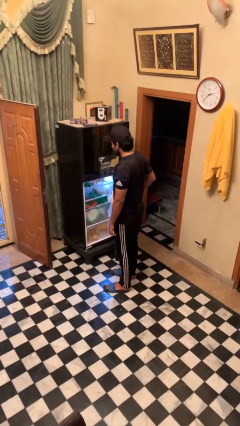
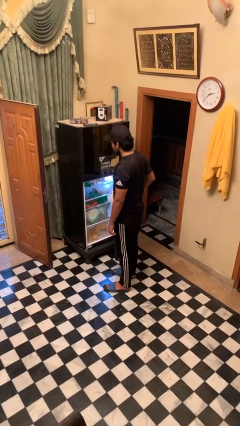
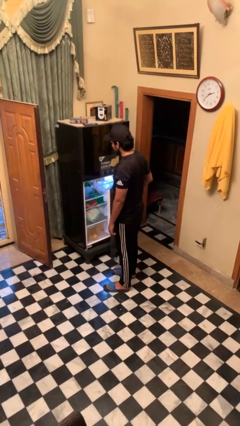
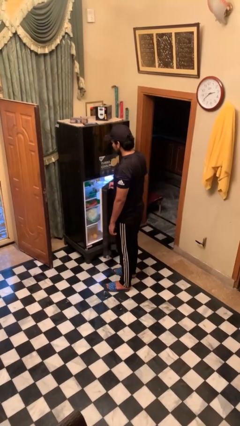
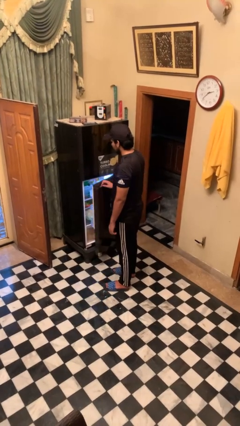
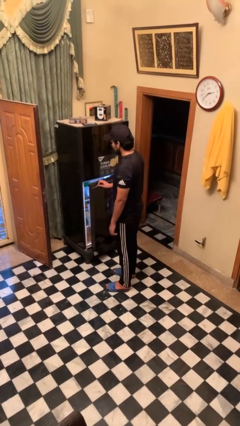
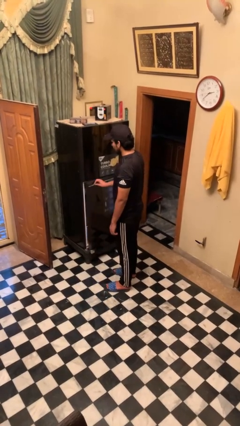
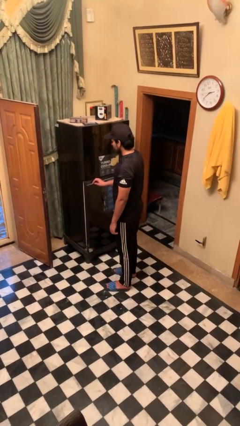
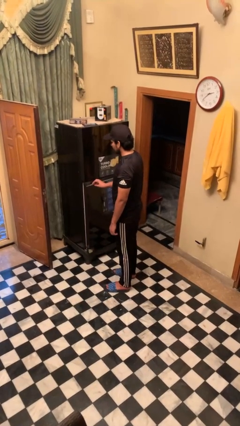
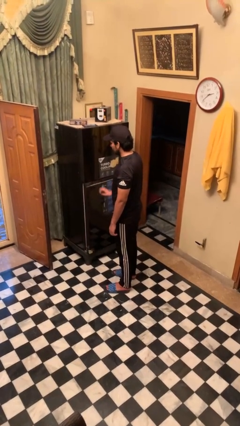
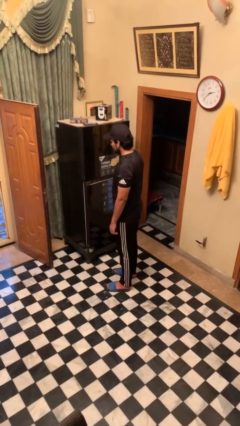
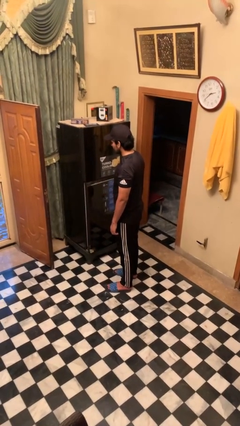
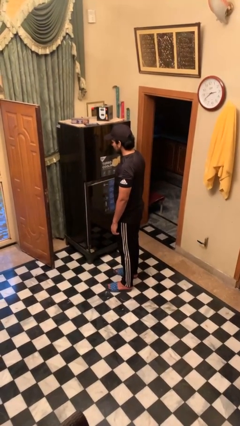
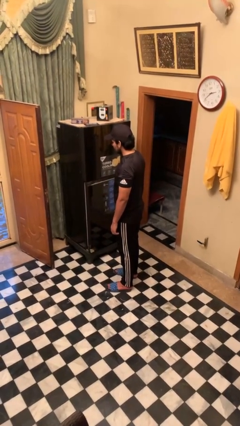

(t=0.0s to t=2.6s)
person closes refrigerator

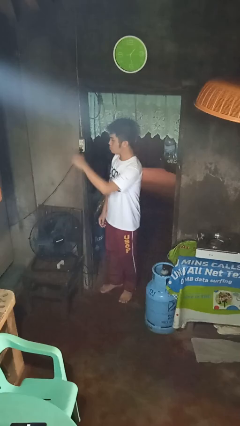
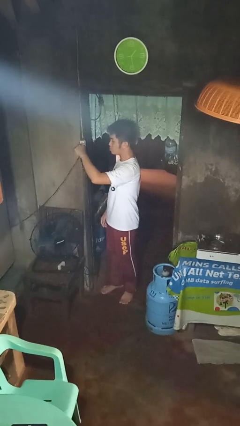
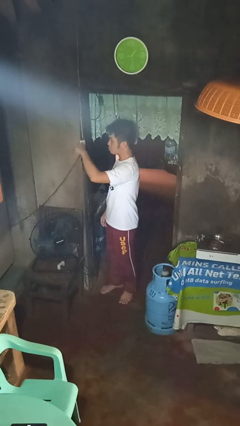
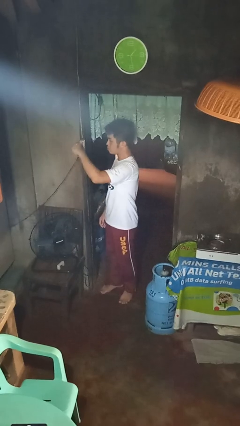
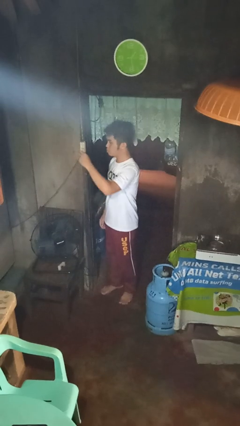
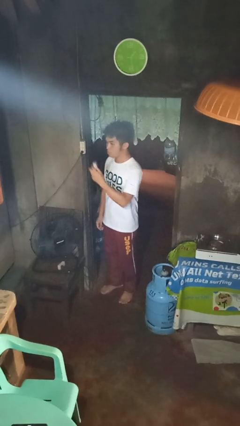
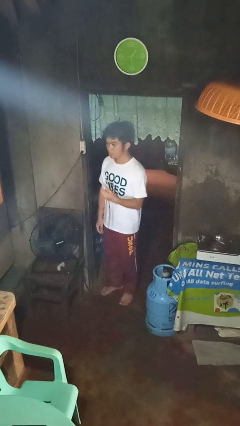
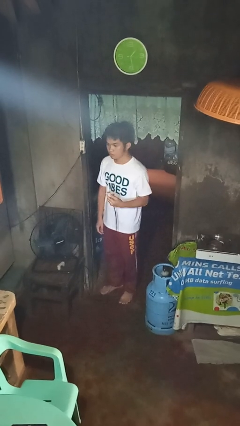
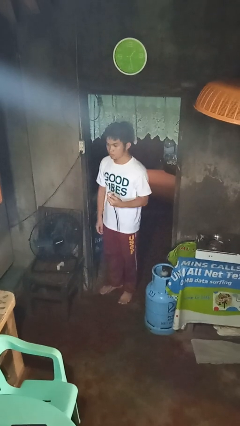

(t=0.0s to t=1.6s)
person unplugs from electrical socket

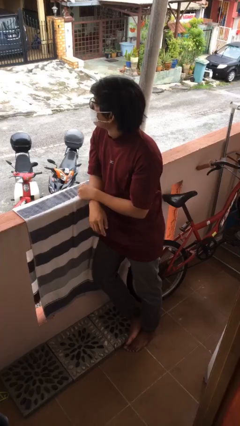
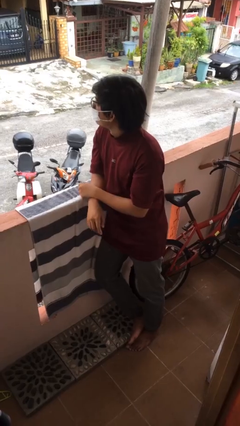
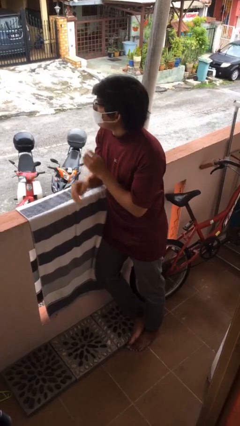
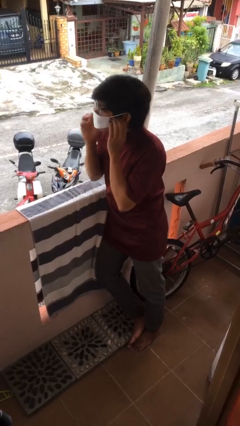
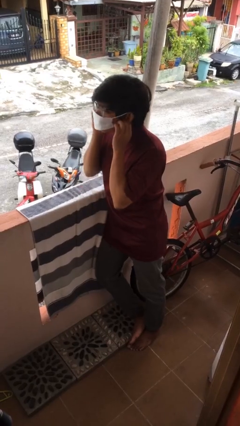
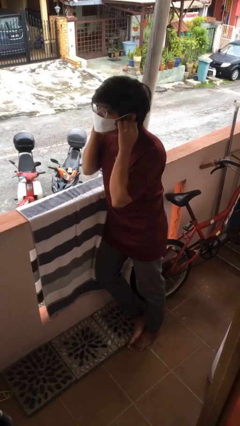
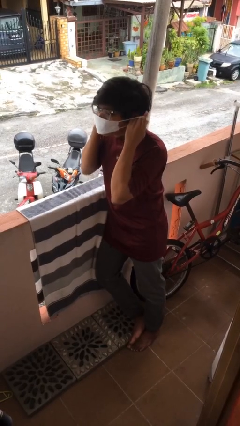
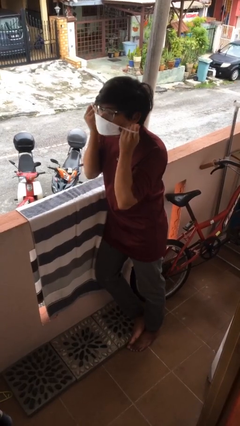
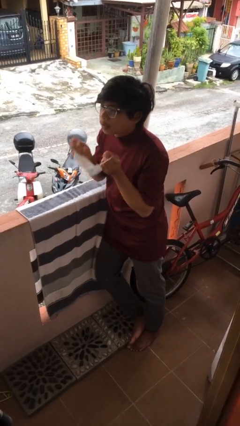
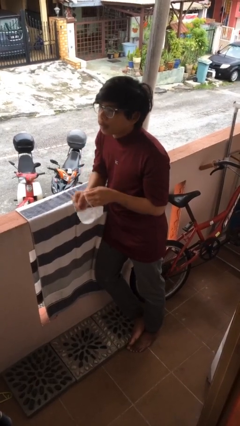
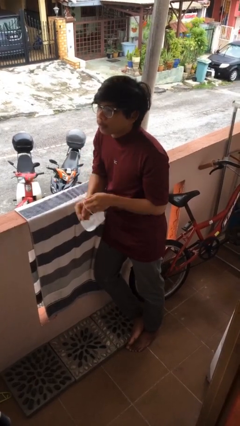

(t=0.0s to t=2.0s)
person takes off facemask

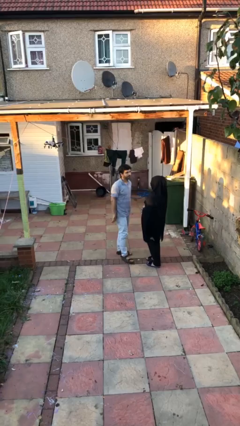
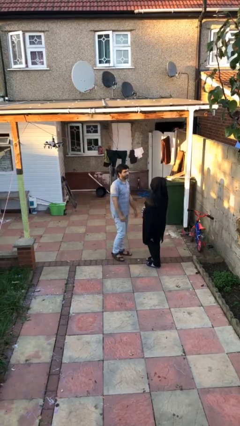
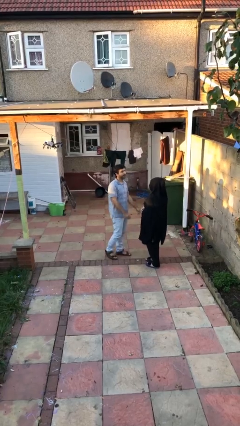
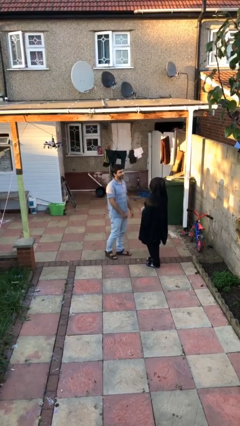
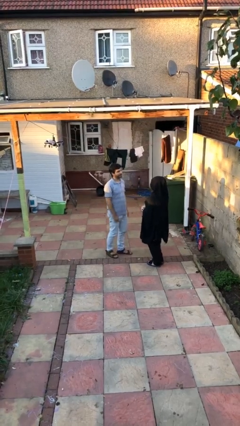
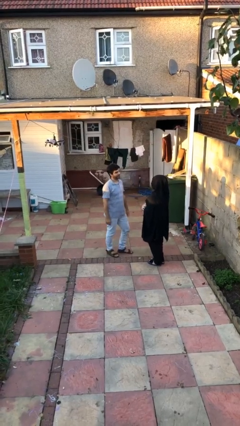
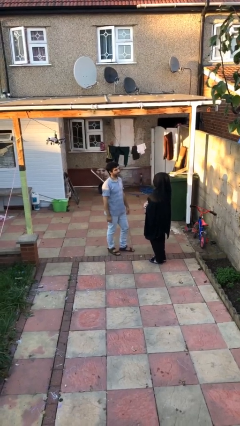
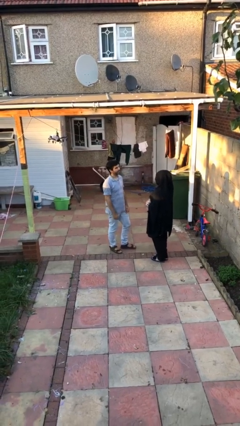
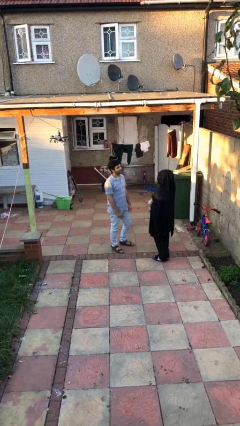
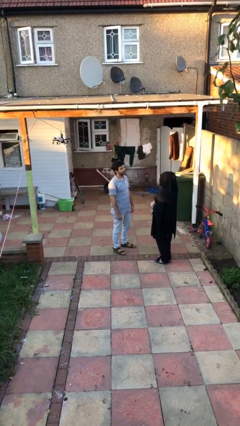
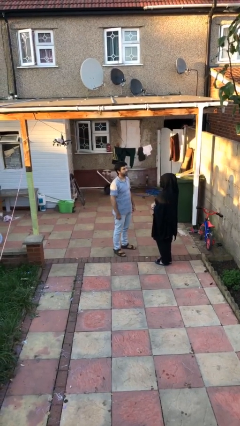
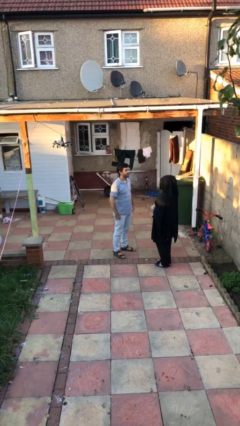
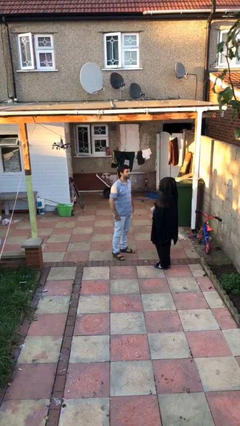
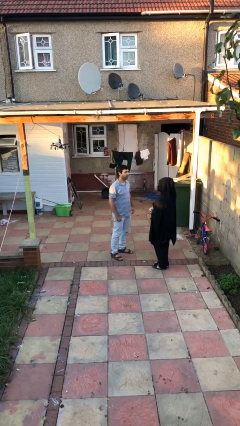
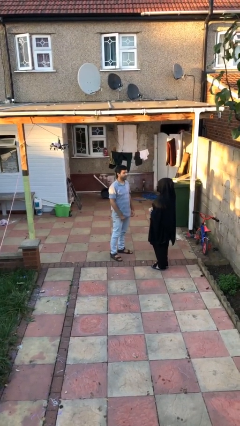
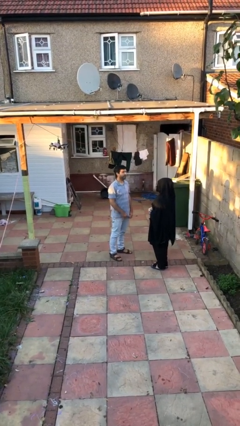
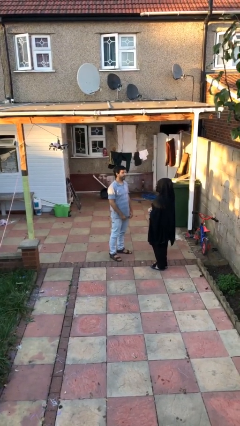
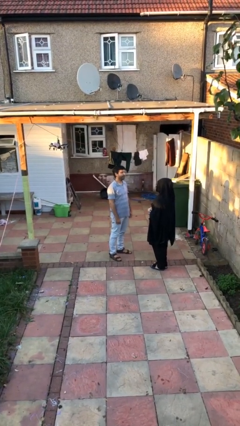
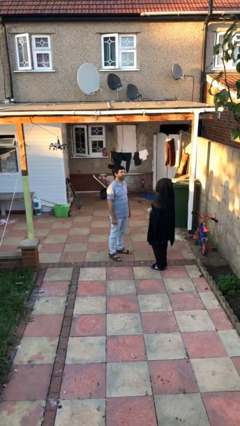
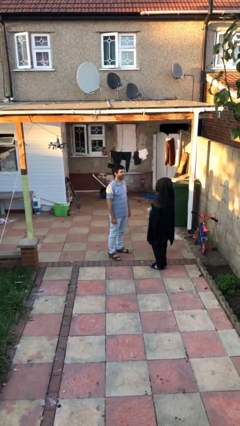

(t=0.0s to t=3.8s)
person talks to person

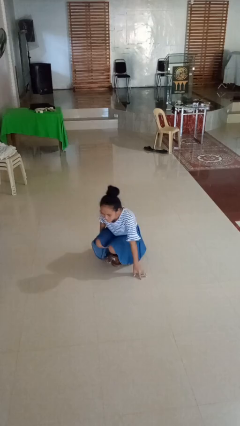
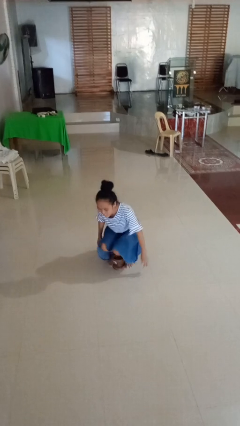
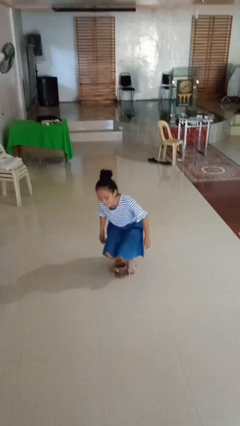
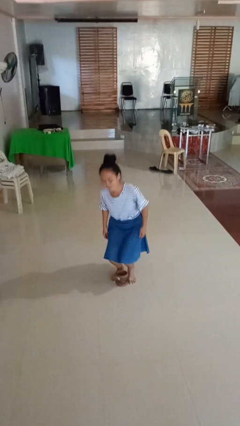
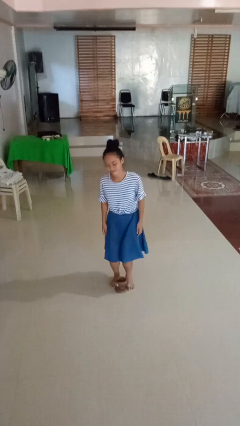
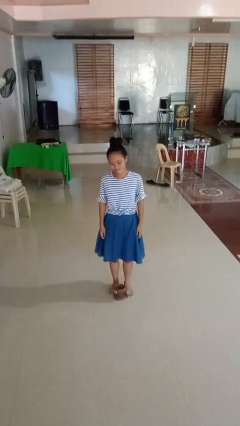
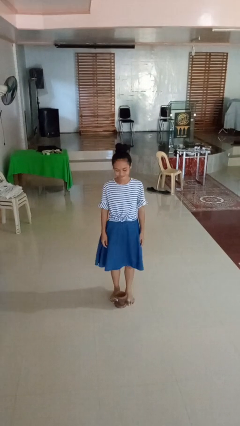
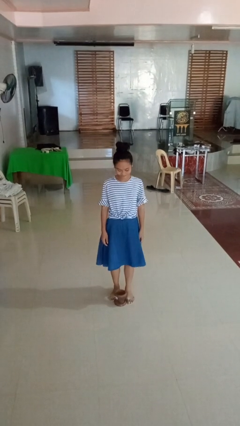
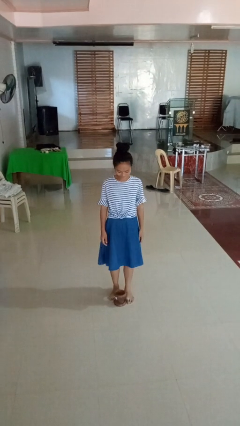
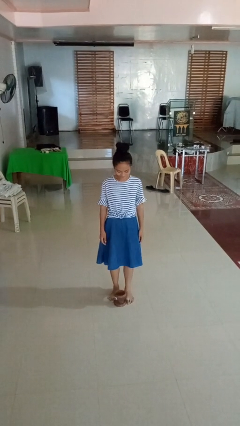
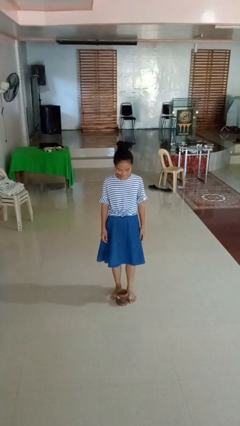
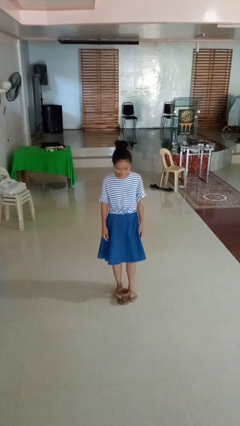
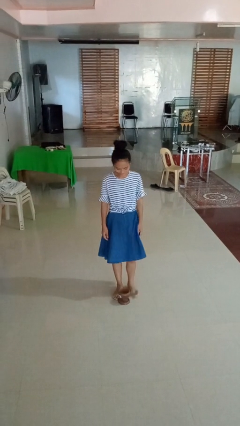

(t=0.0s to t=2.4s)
person stands up from floor

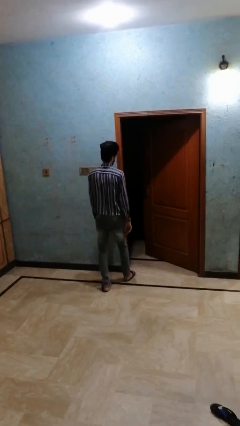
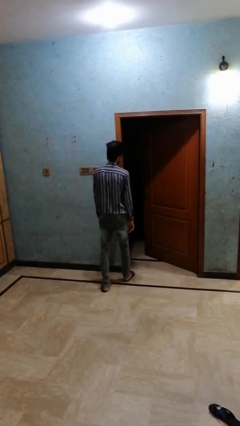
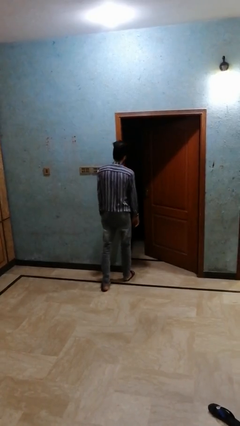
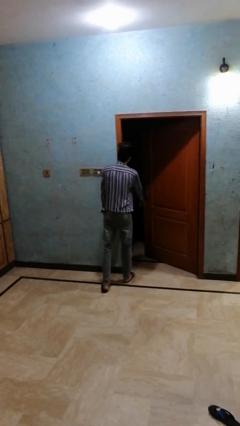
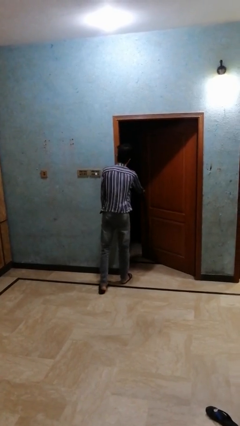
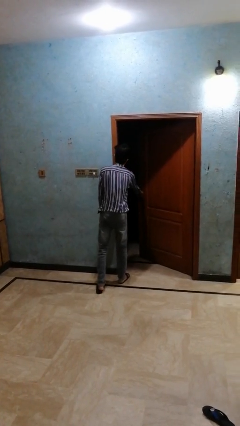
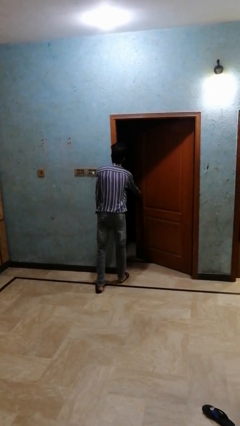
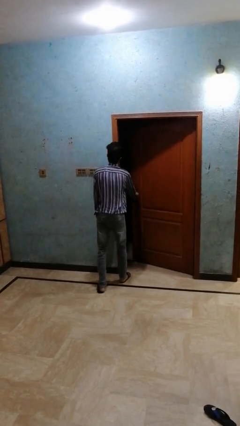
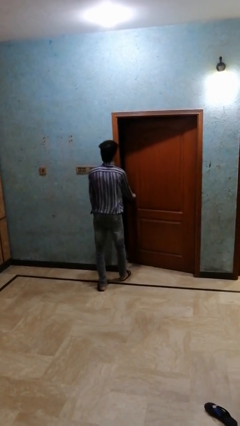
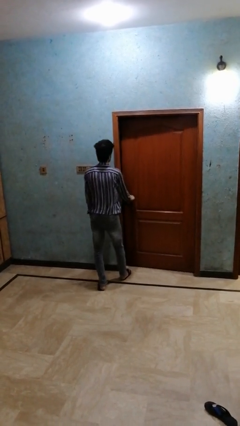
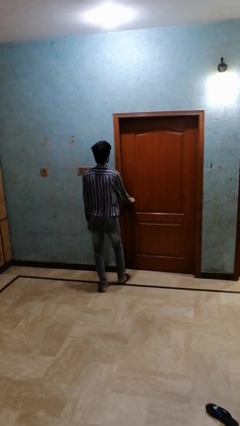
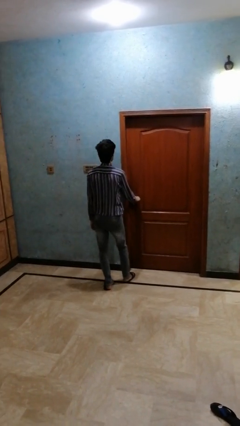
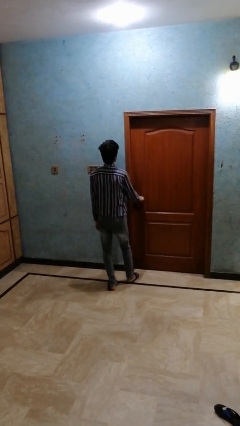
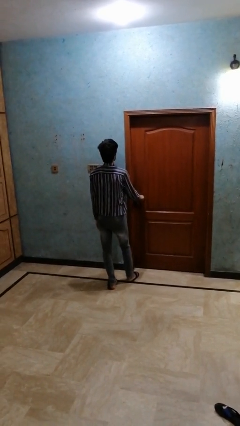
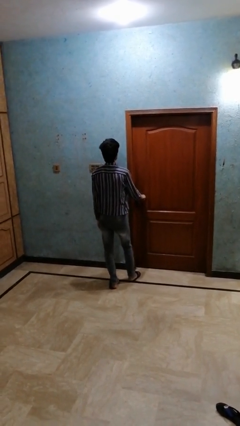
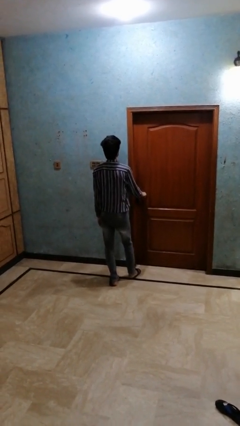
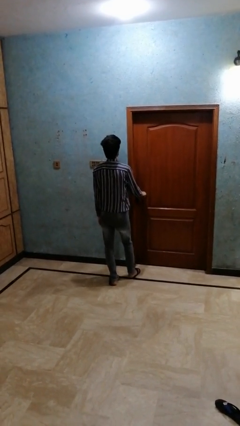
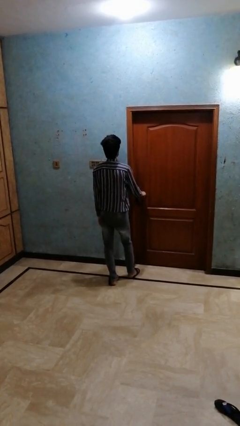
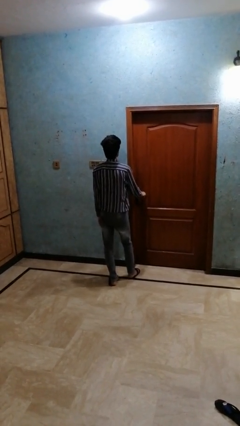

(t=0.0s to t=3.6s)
person closes closet door

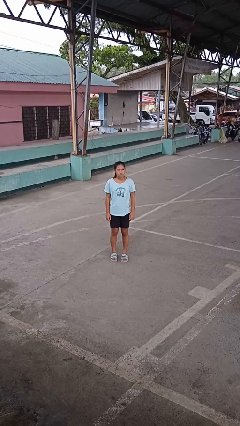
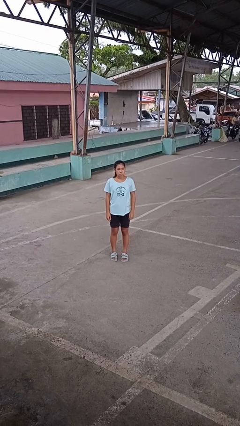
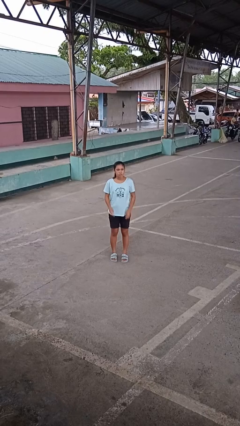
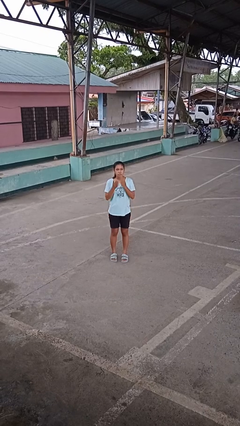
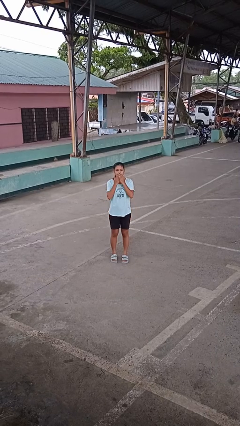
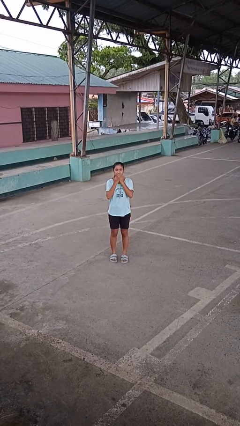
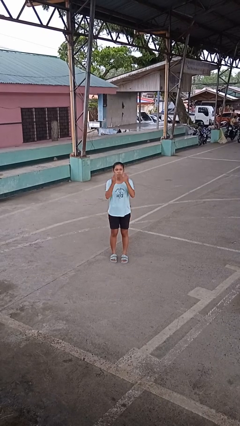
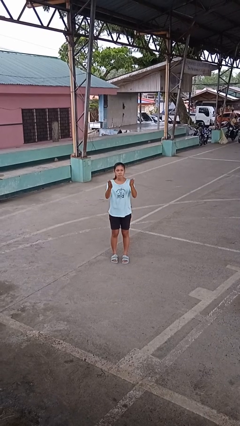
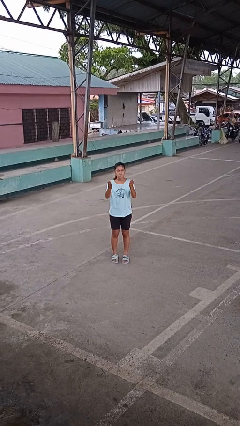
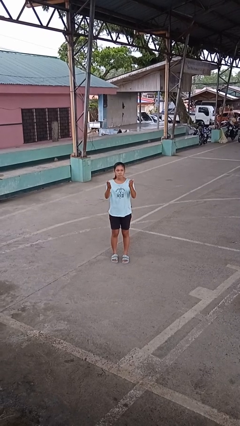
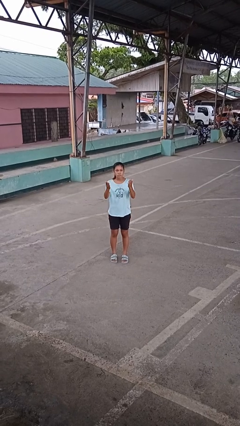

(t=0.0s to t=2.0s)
person gestures blow kiss
